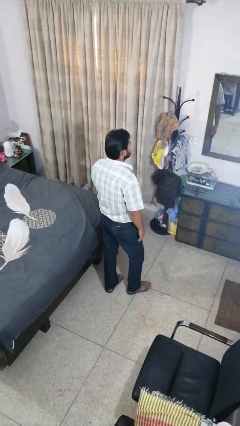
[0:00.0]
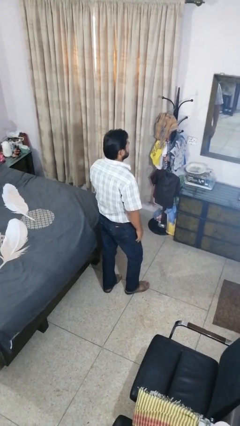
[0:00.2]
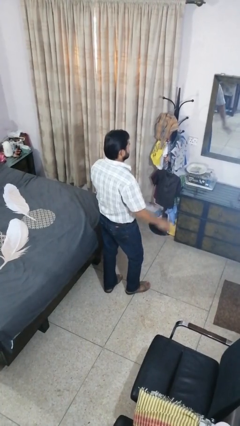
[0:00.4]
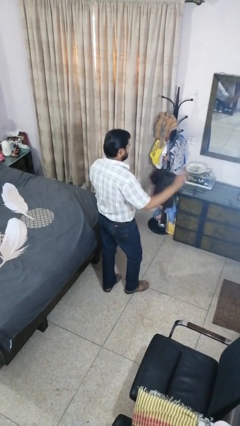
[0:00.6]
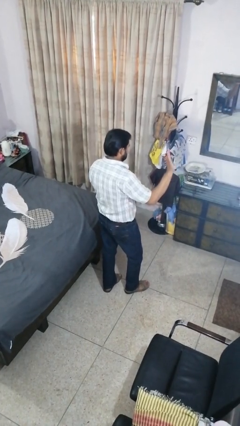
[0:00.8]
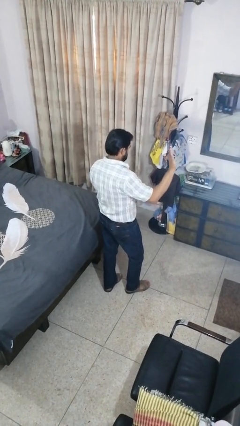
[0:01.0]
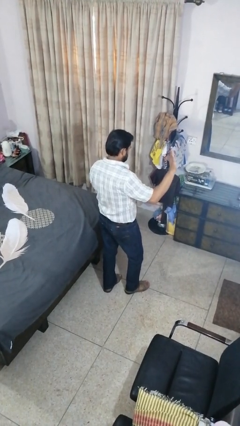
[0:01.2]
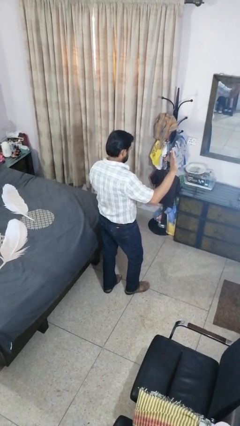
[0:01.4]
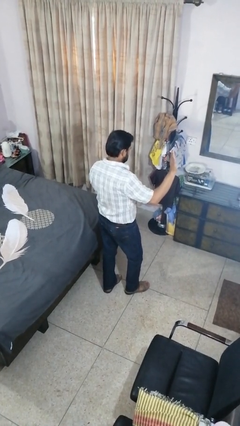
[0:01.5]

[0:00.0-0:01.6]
person gestures stop

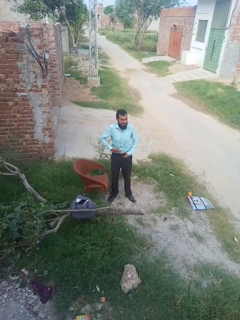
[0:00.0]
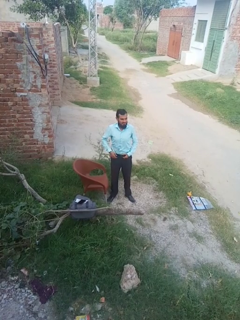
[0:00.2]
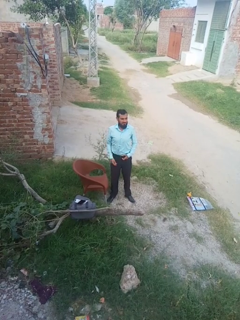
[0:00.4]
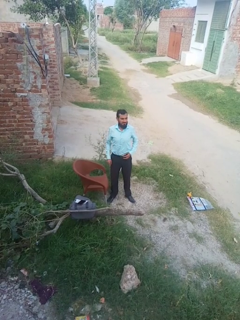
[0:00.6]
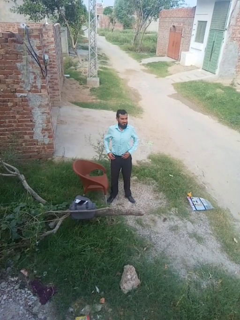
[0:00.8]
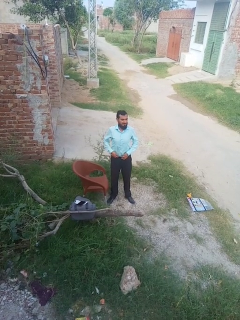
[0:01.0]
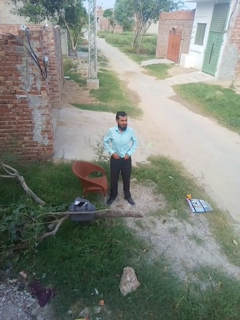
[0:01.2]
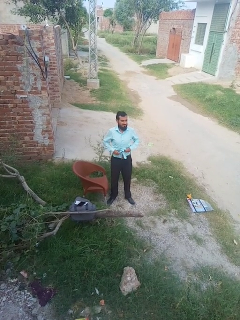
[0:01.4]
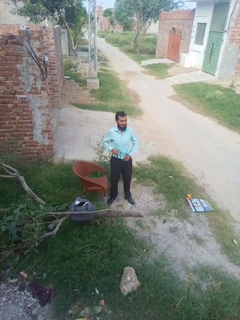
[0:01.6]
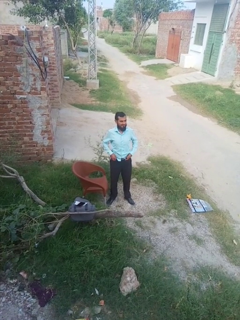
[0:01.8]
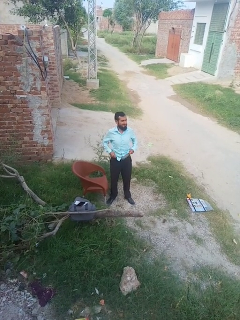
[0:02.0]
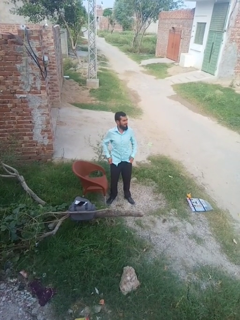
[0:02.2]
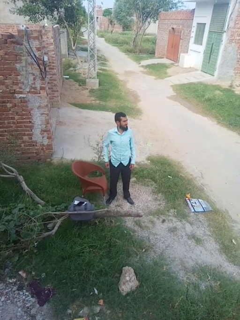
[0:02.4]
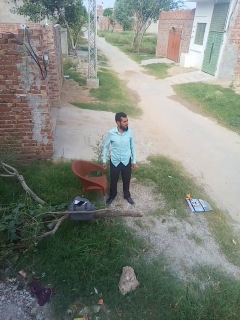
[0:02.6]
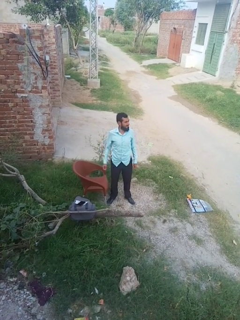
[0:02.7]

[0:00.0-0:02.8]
person untucks shirt

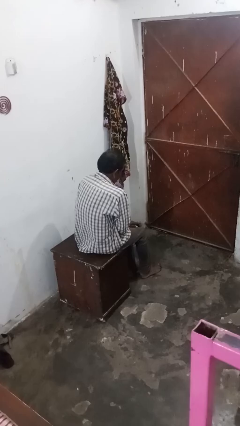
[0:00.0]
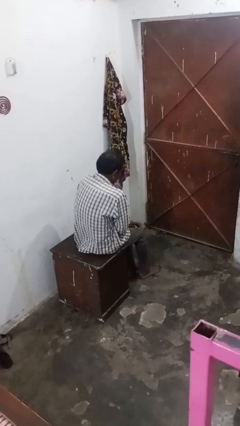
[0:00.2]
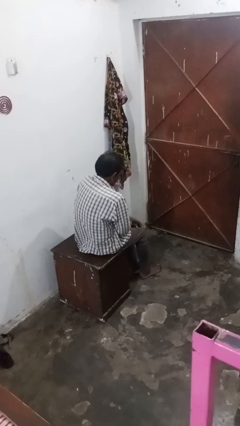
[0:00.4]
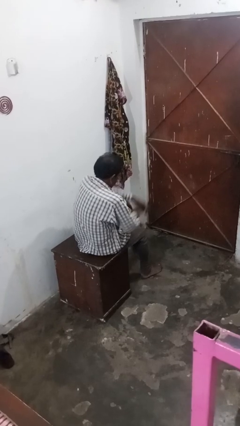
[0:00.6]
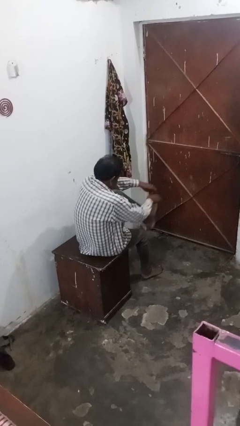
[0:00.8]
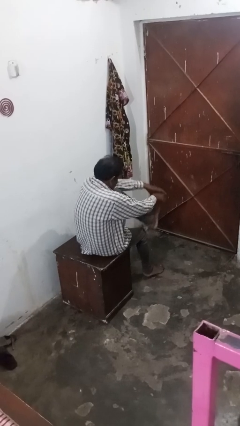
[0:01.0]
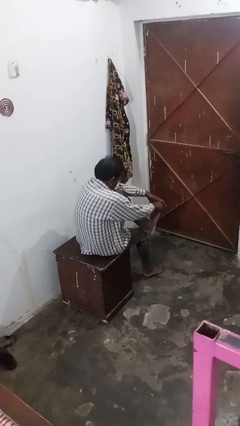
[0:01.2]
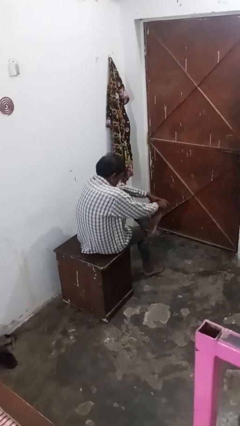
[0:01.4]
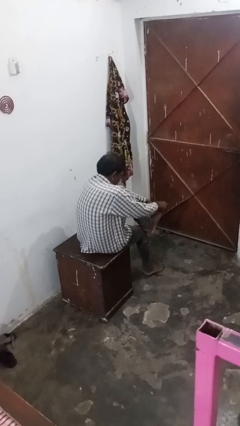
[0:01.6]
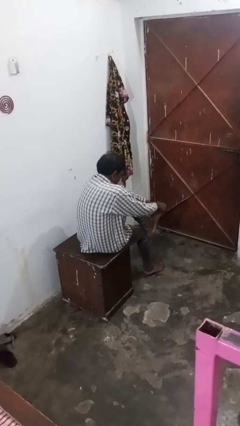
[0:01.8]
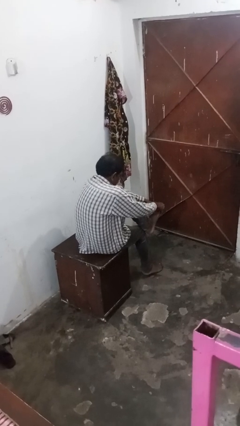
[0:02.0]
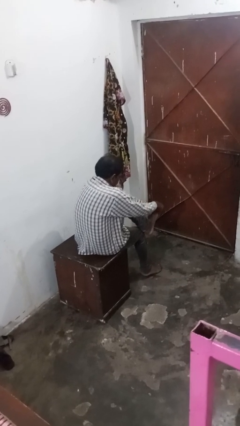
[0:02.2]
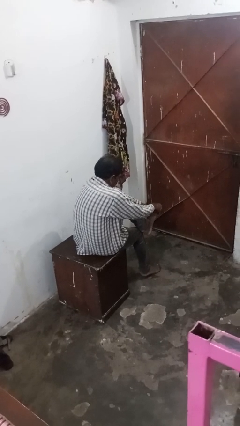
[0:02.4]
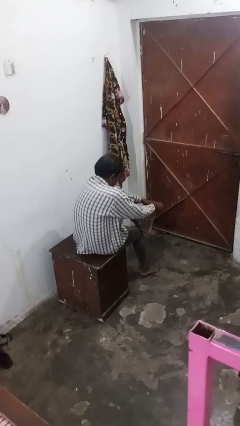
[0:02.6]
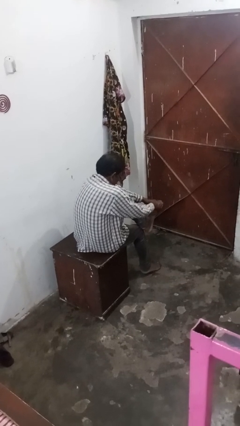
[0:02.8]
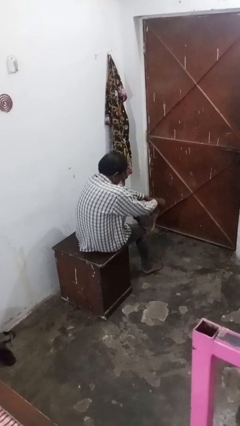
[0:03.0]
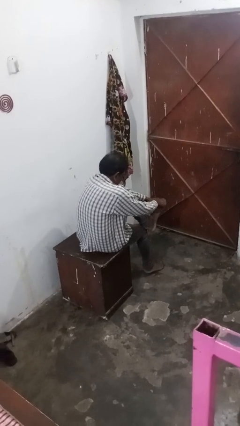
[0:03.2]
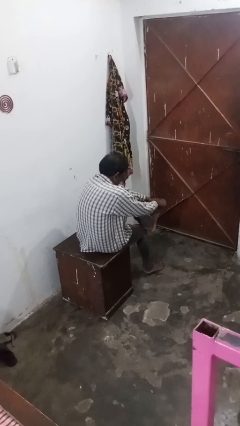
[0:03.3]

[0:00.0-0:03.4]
person rubs foot

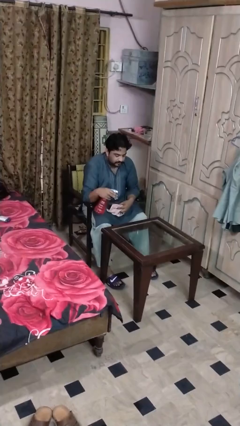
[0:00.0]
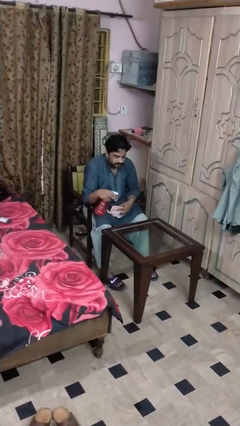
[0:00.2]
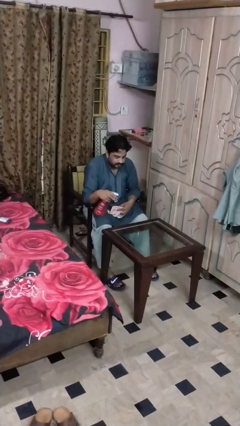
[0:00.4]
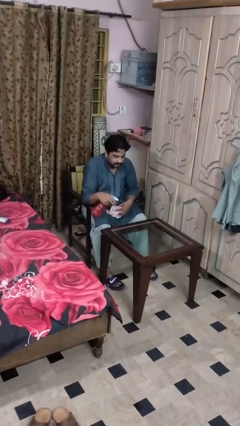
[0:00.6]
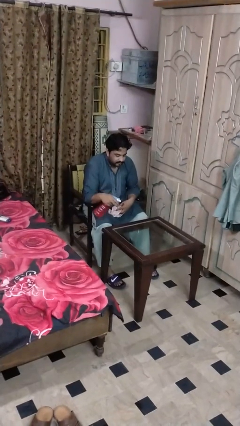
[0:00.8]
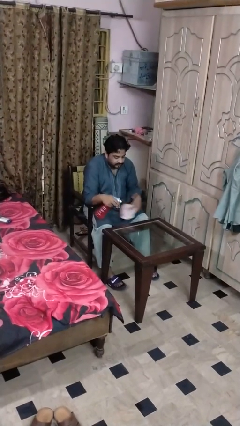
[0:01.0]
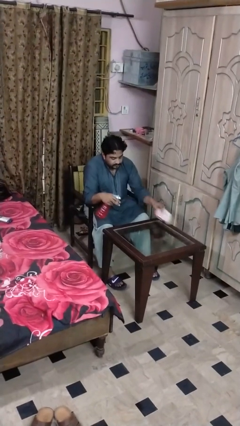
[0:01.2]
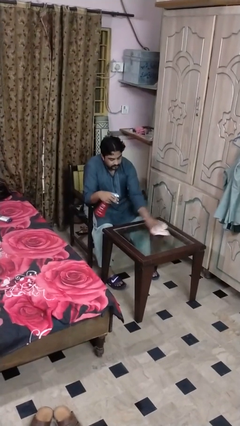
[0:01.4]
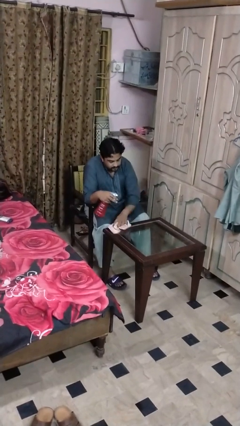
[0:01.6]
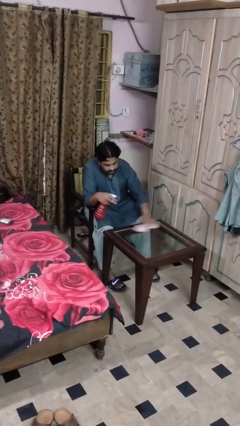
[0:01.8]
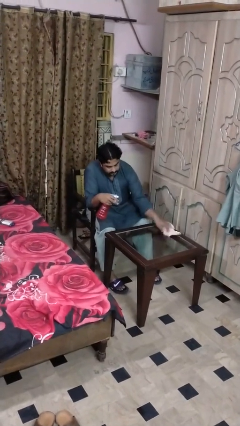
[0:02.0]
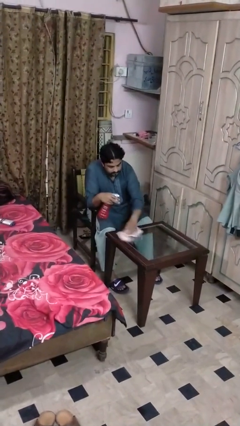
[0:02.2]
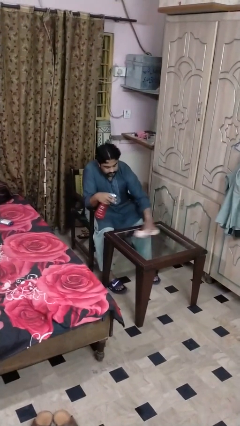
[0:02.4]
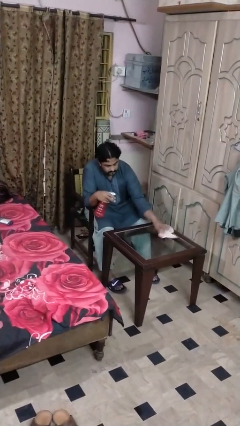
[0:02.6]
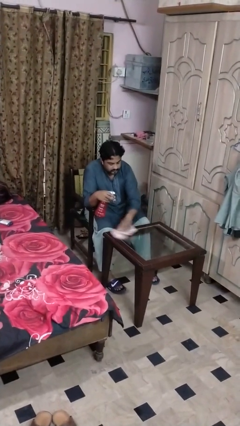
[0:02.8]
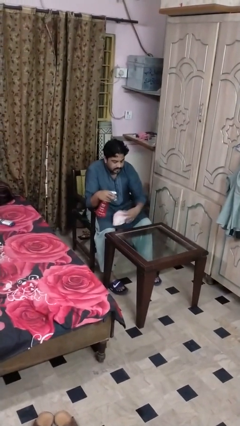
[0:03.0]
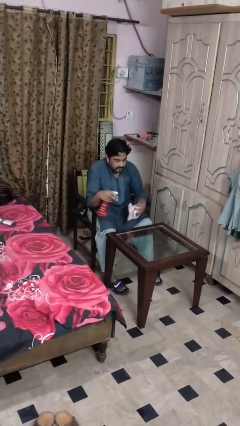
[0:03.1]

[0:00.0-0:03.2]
person cleans table with rag

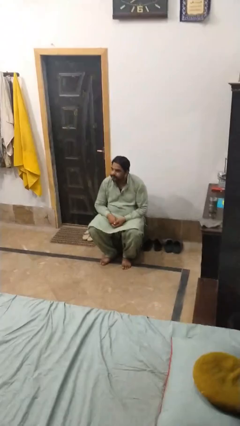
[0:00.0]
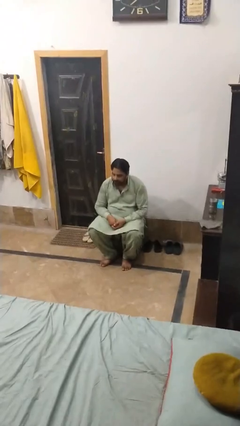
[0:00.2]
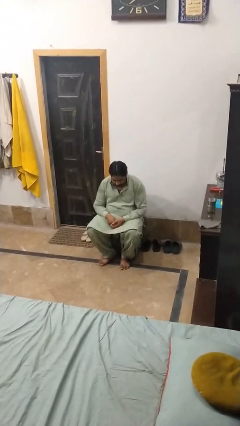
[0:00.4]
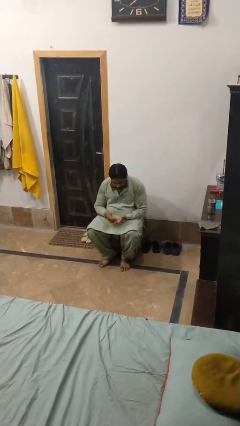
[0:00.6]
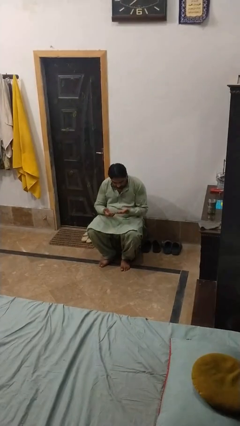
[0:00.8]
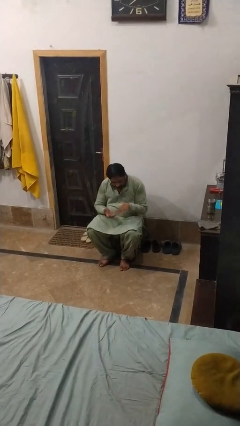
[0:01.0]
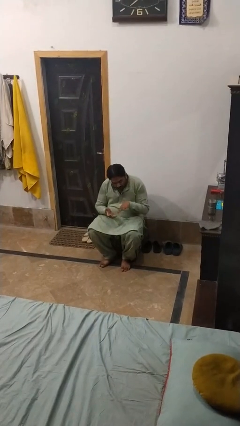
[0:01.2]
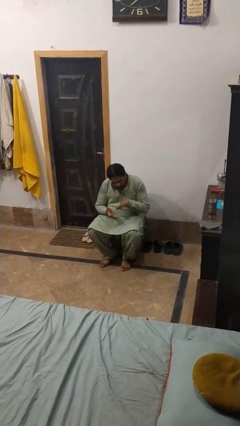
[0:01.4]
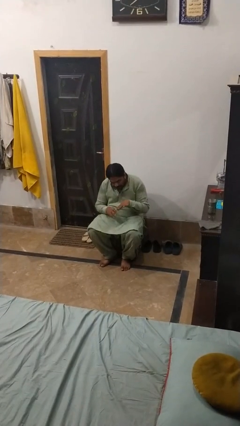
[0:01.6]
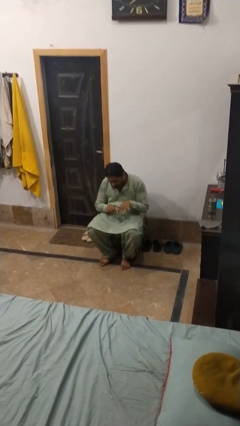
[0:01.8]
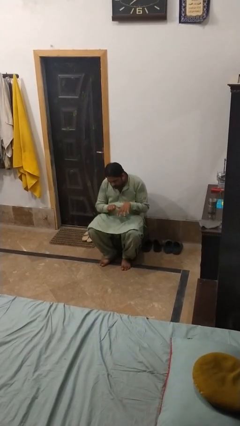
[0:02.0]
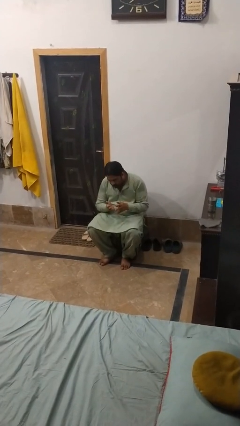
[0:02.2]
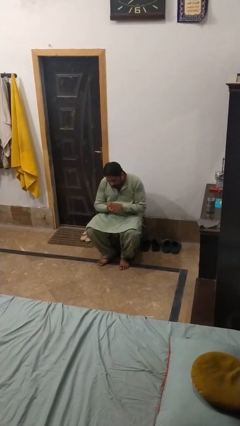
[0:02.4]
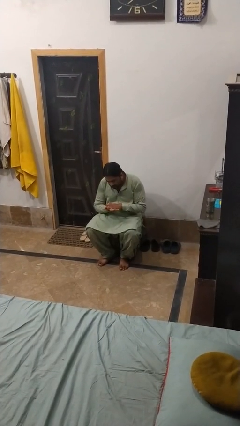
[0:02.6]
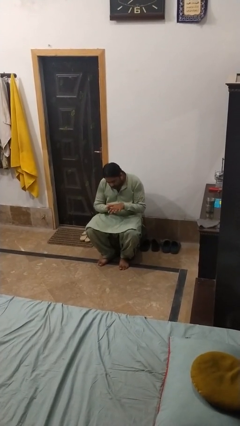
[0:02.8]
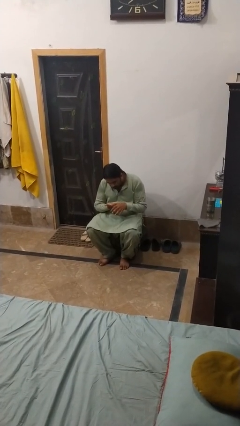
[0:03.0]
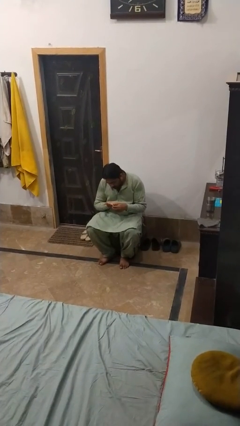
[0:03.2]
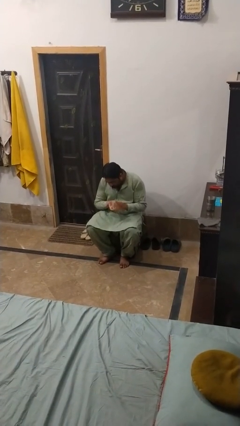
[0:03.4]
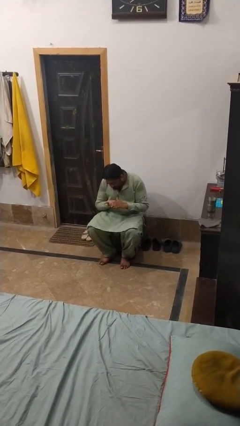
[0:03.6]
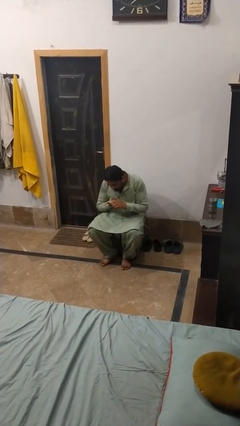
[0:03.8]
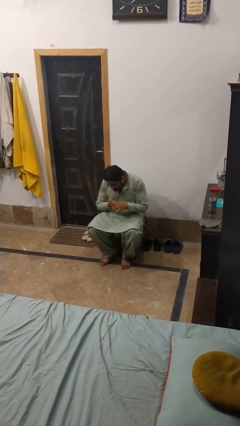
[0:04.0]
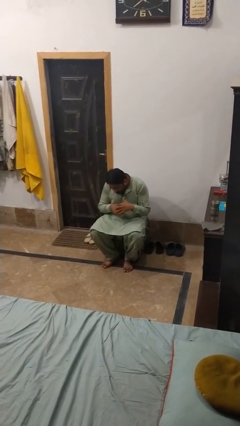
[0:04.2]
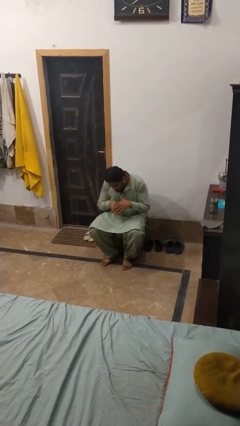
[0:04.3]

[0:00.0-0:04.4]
person looks at hands in lap

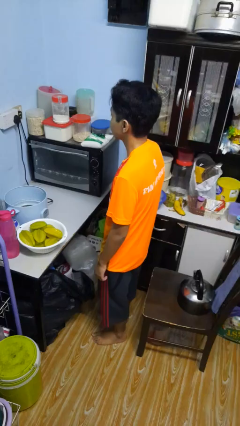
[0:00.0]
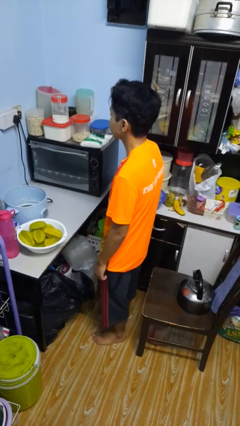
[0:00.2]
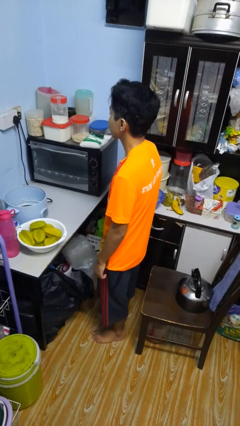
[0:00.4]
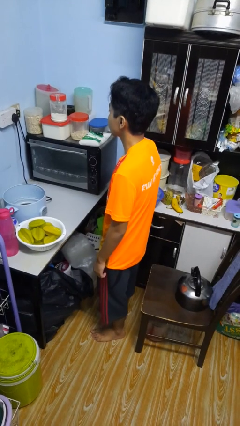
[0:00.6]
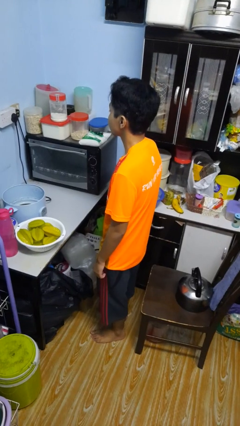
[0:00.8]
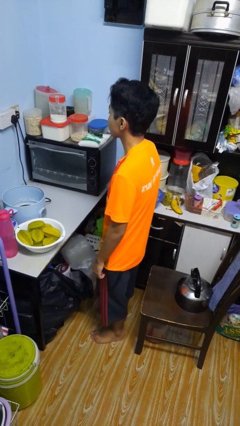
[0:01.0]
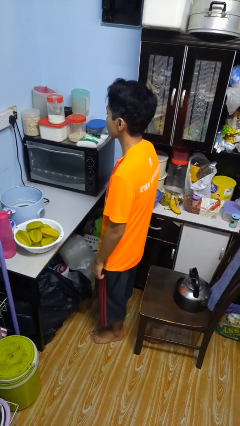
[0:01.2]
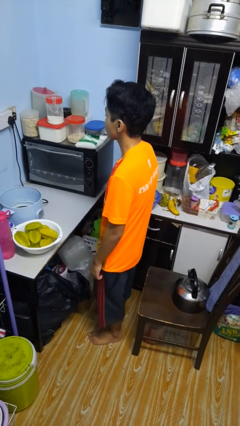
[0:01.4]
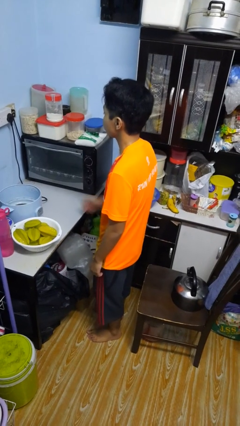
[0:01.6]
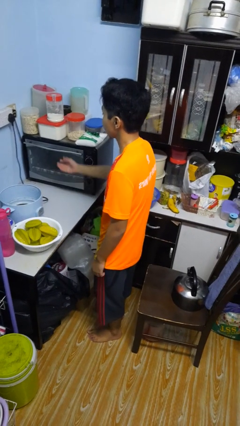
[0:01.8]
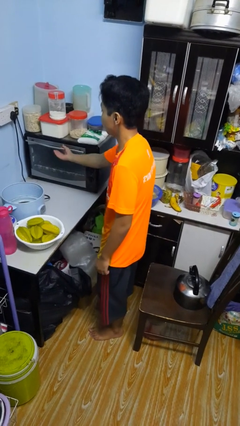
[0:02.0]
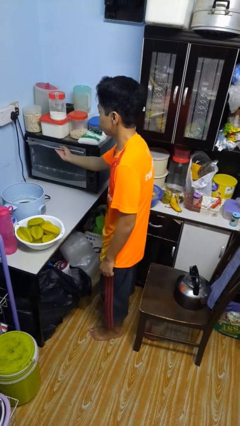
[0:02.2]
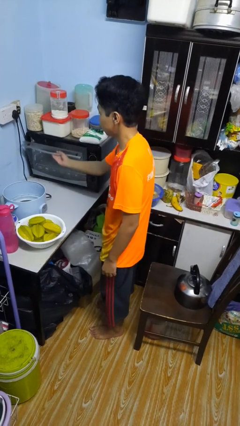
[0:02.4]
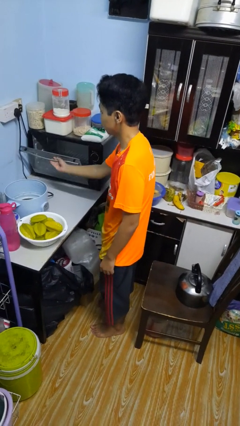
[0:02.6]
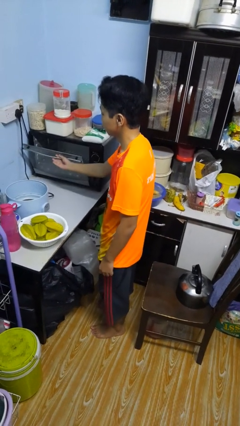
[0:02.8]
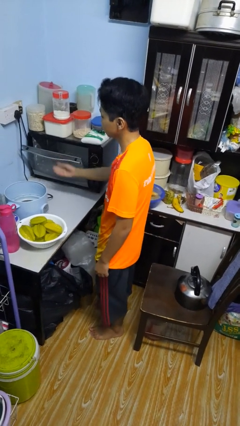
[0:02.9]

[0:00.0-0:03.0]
person opens microwave
